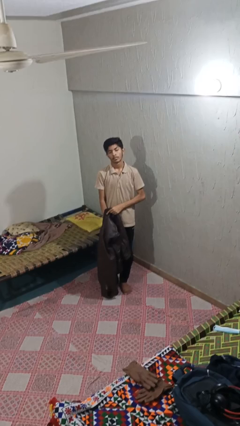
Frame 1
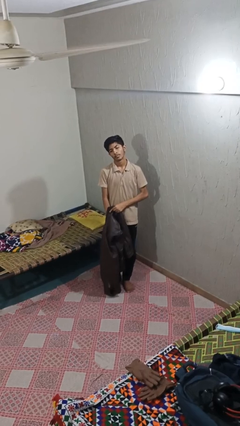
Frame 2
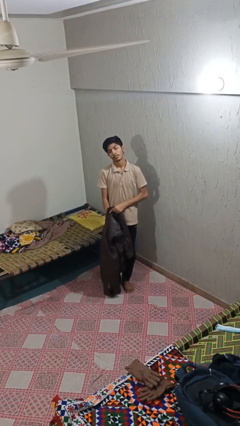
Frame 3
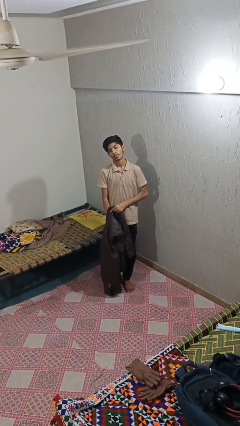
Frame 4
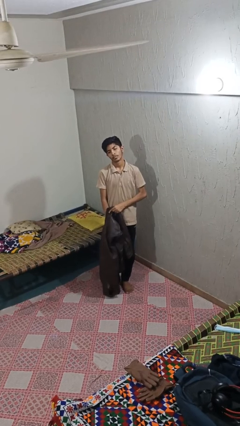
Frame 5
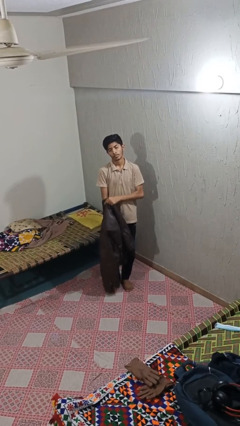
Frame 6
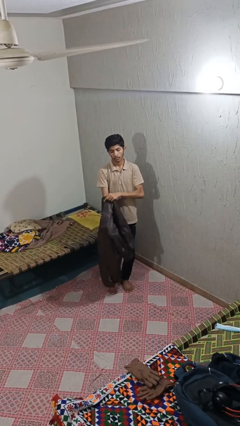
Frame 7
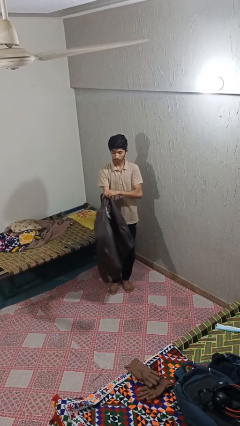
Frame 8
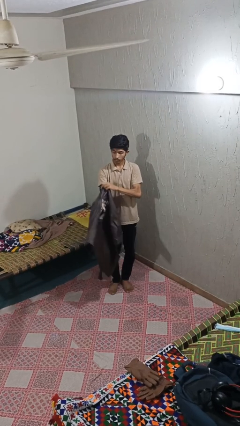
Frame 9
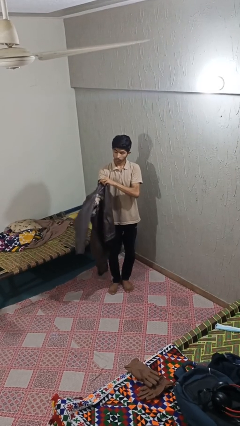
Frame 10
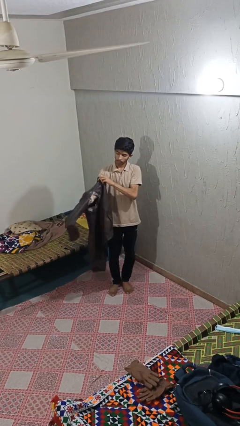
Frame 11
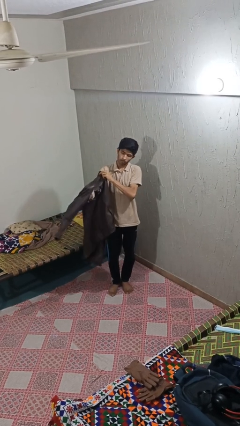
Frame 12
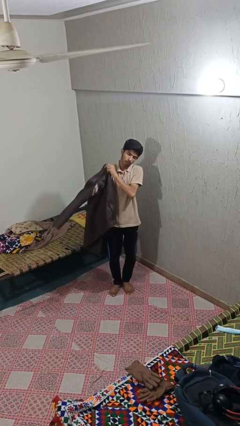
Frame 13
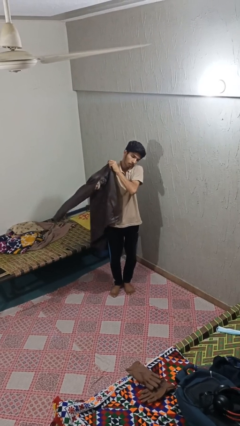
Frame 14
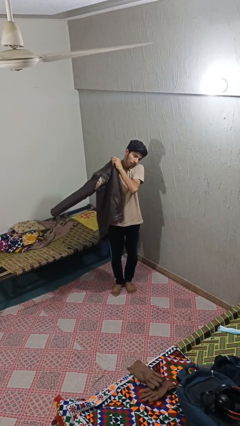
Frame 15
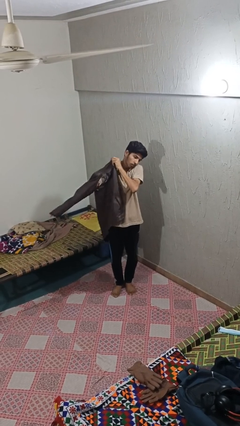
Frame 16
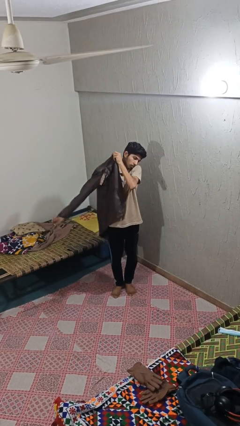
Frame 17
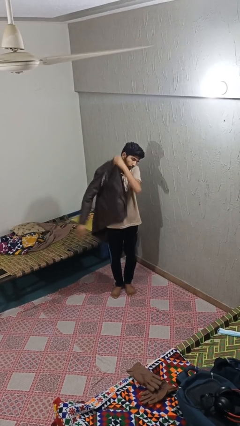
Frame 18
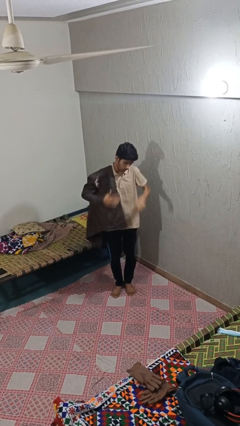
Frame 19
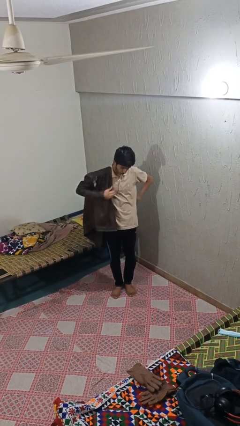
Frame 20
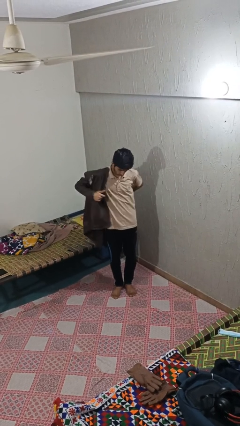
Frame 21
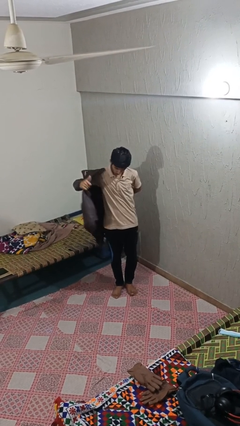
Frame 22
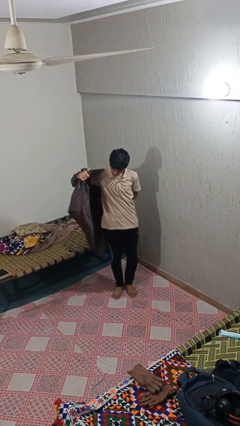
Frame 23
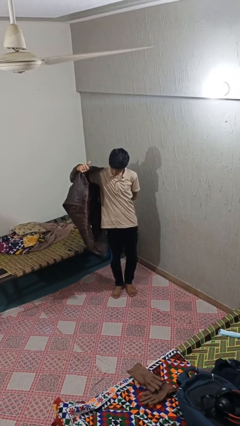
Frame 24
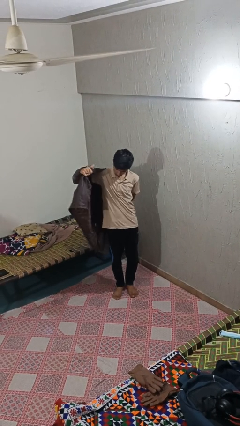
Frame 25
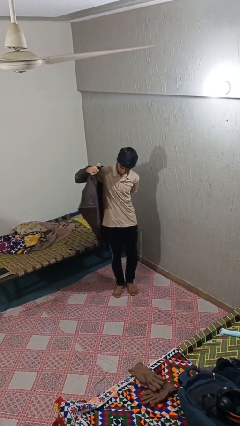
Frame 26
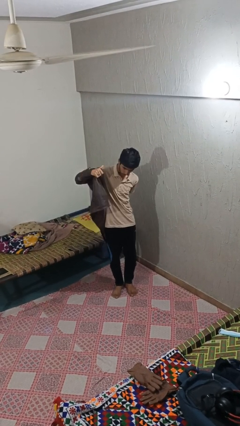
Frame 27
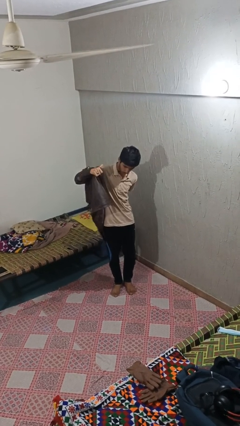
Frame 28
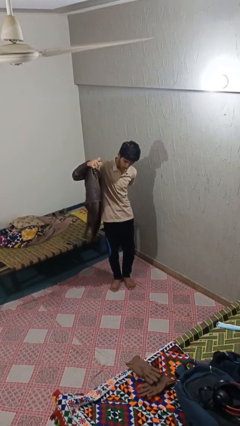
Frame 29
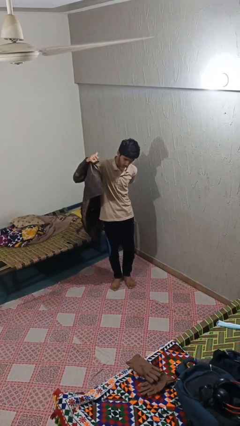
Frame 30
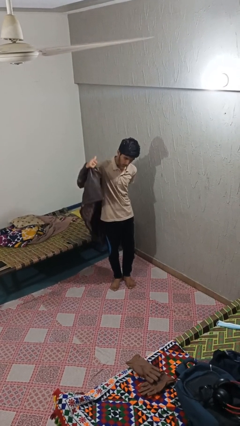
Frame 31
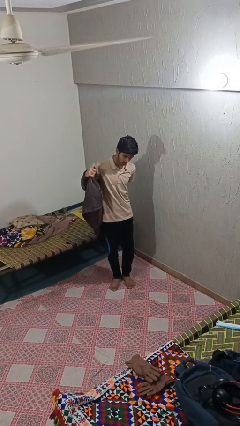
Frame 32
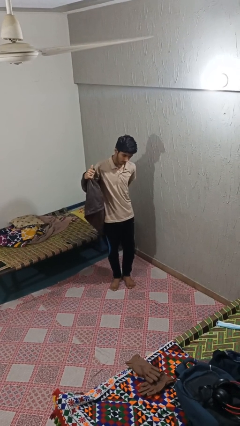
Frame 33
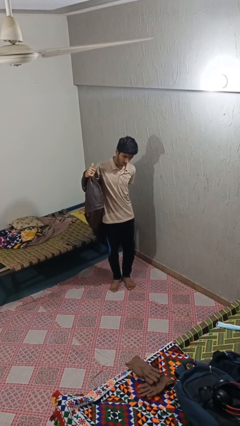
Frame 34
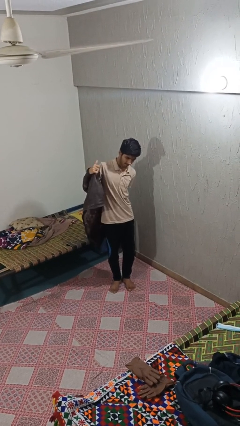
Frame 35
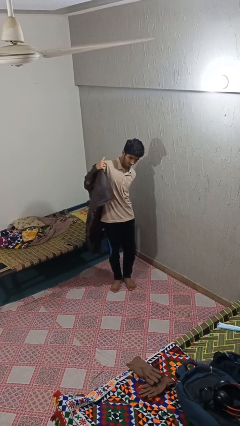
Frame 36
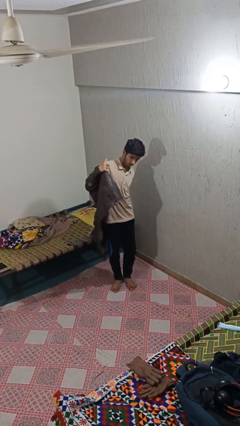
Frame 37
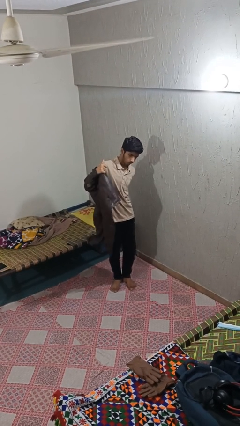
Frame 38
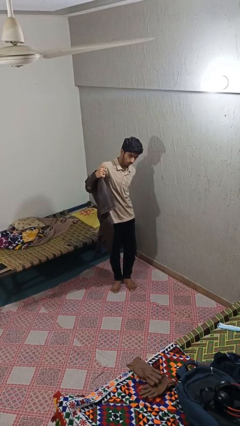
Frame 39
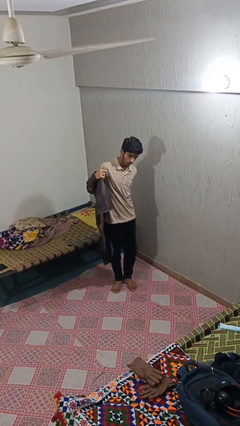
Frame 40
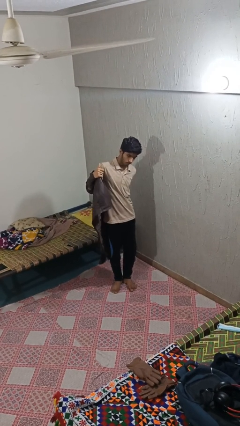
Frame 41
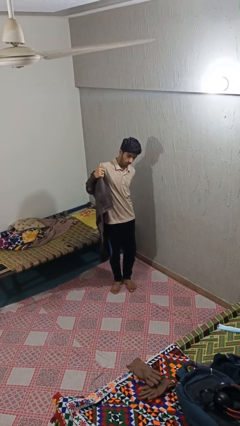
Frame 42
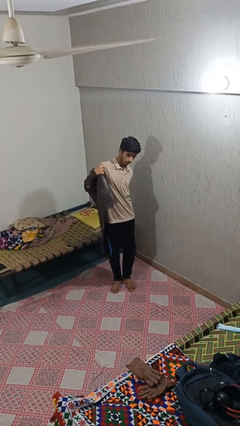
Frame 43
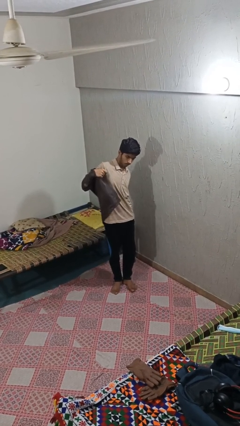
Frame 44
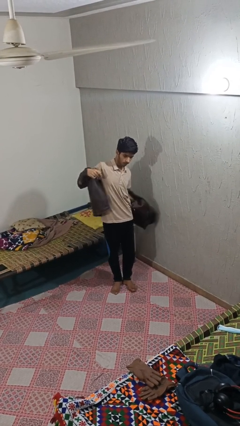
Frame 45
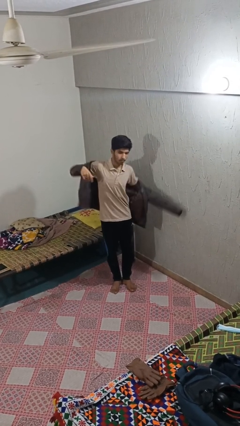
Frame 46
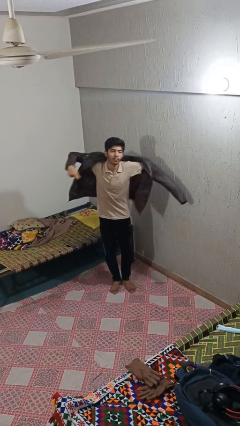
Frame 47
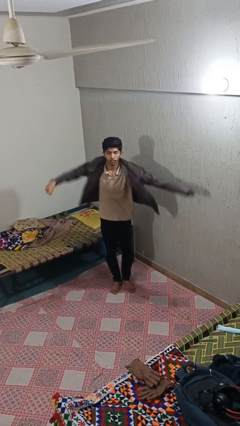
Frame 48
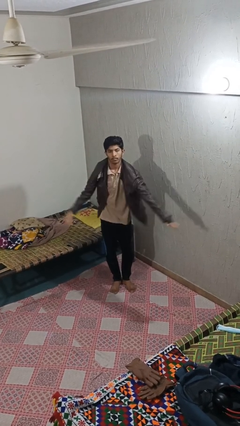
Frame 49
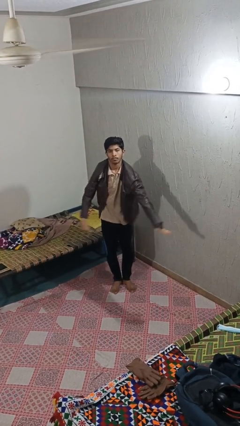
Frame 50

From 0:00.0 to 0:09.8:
person puts on jacket

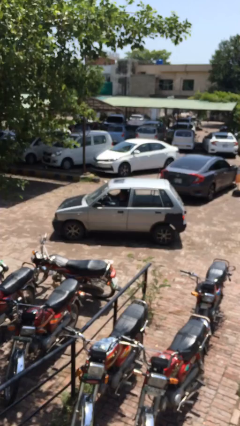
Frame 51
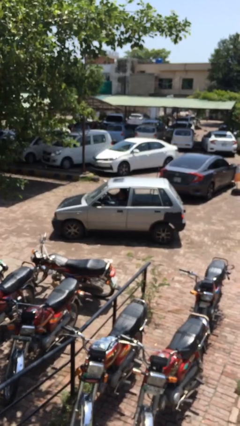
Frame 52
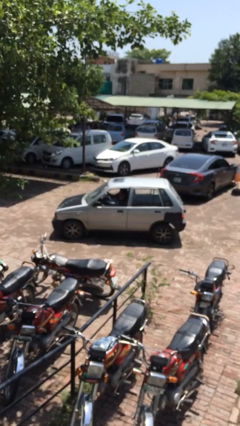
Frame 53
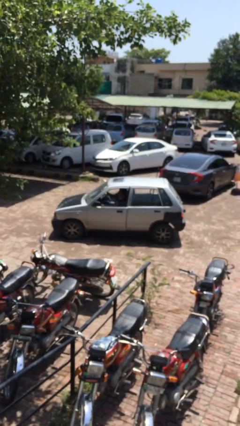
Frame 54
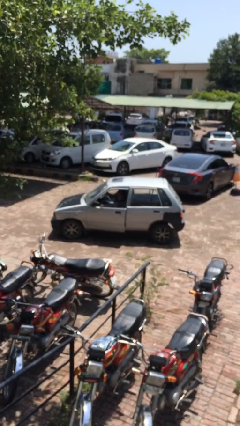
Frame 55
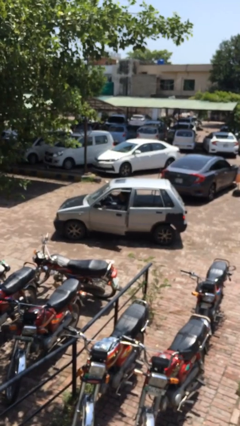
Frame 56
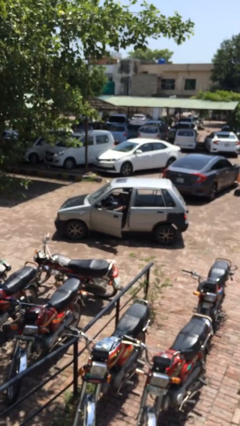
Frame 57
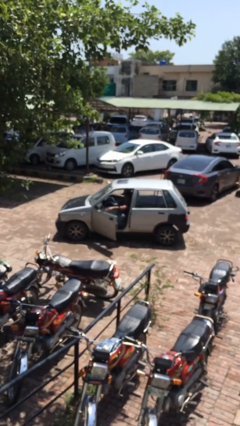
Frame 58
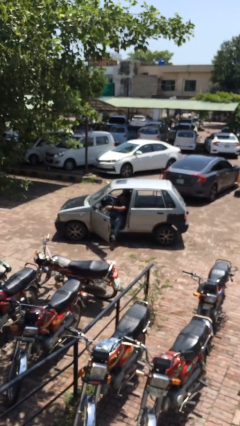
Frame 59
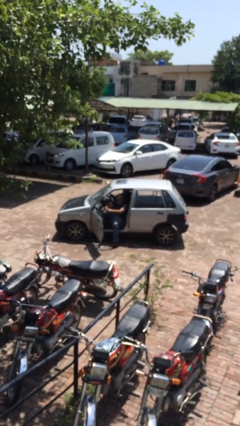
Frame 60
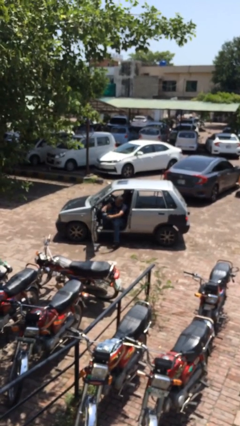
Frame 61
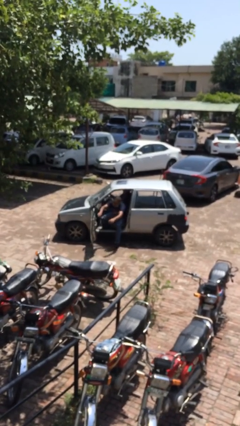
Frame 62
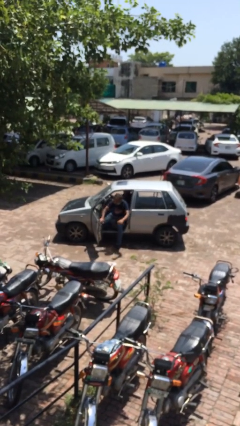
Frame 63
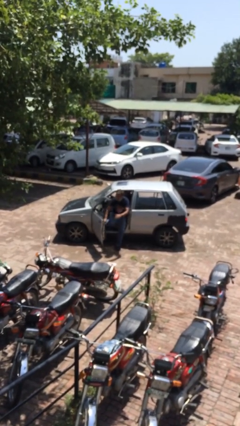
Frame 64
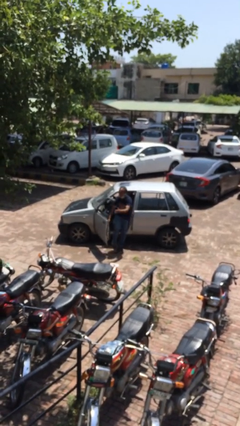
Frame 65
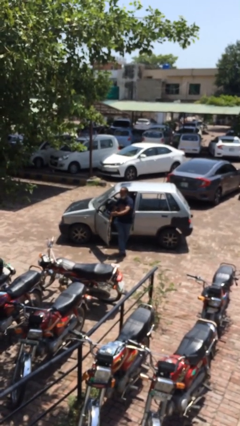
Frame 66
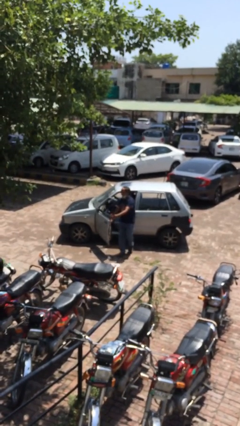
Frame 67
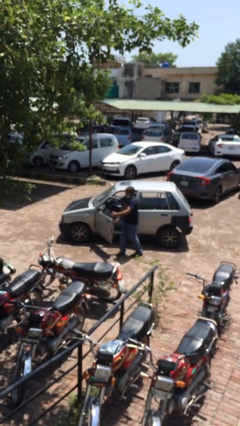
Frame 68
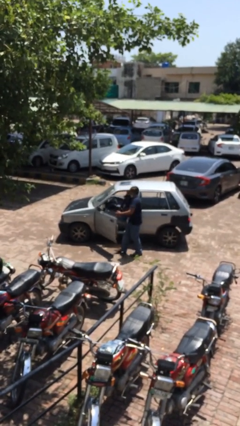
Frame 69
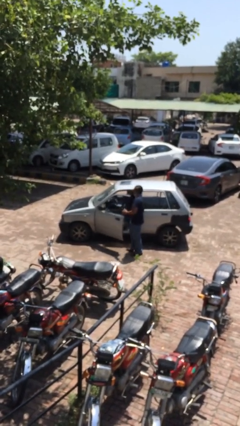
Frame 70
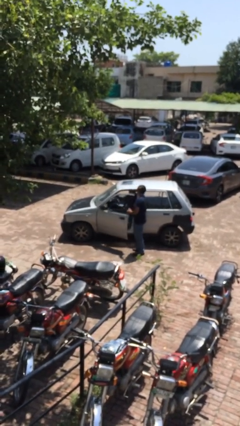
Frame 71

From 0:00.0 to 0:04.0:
car drops off person

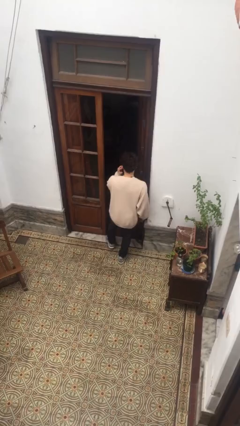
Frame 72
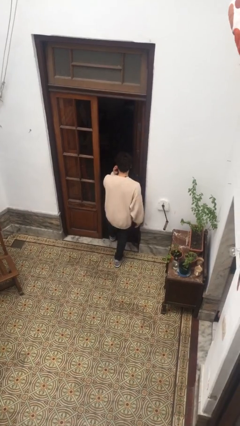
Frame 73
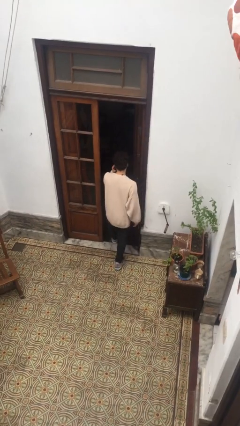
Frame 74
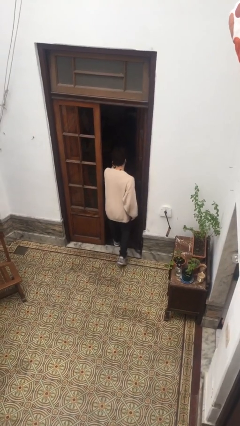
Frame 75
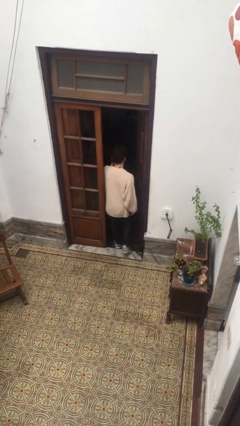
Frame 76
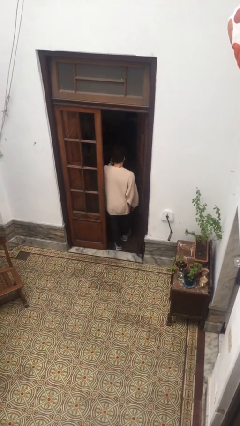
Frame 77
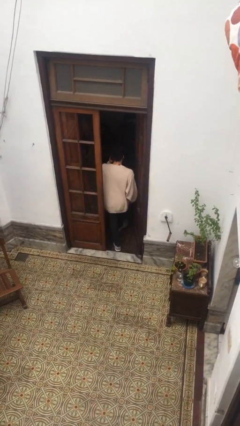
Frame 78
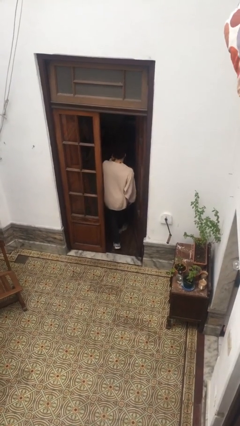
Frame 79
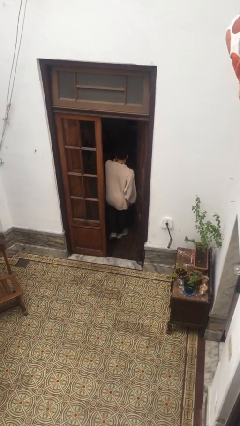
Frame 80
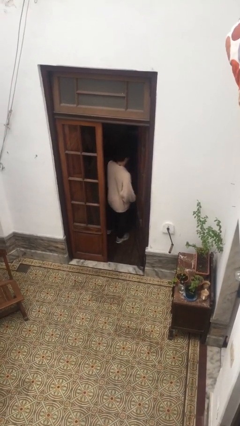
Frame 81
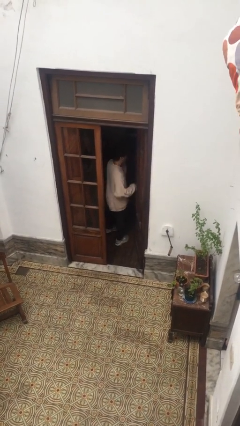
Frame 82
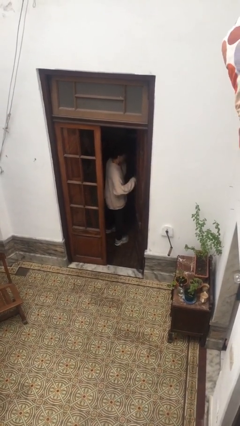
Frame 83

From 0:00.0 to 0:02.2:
person exits scene through structure

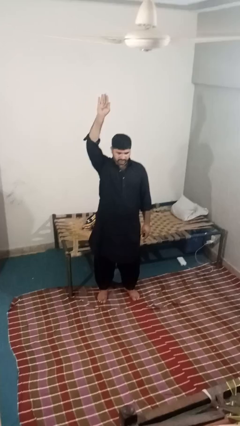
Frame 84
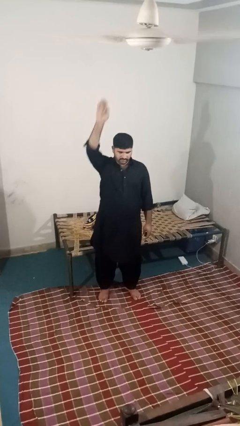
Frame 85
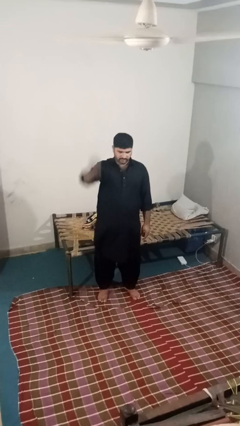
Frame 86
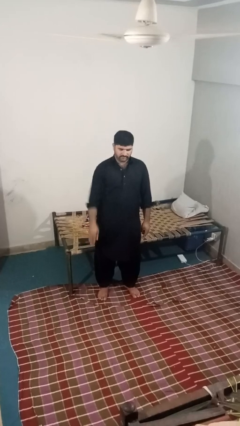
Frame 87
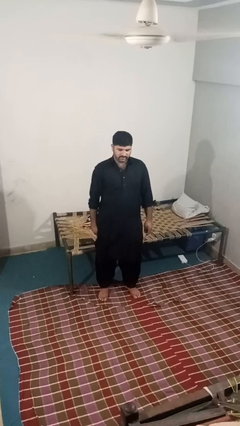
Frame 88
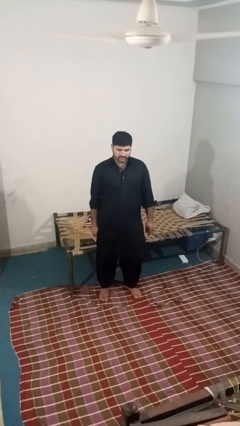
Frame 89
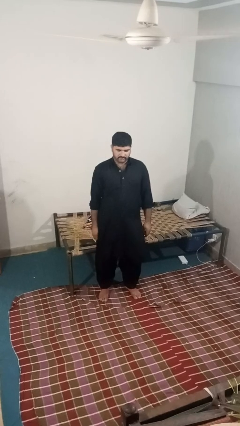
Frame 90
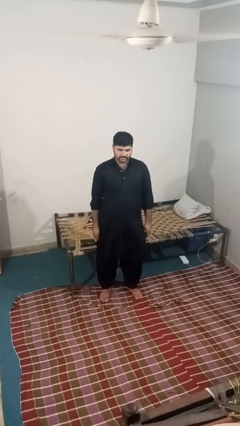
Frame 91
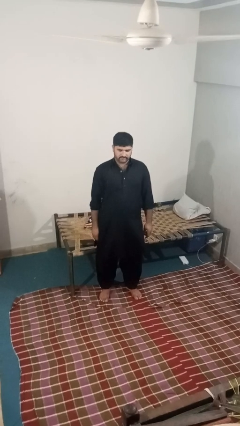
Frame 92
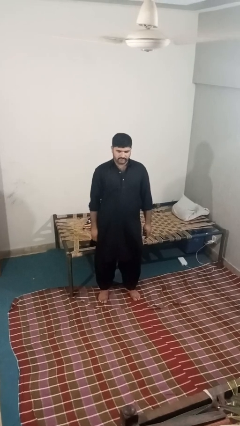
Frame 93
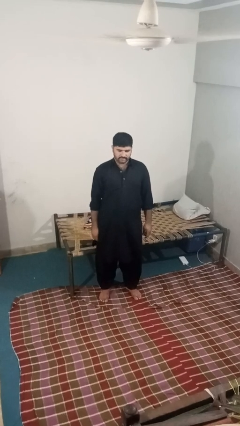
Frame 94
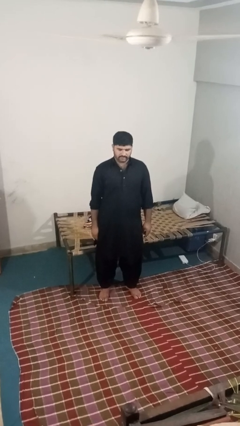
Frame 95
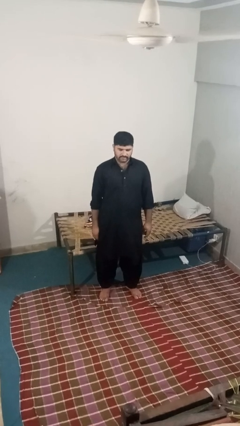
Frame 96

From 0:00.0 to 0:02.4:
person gestures lower hand
